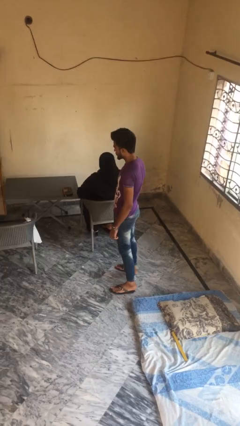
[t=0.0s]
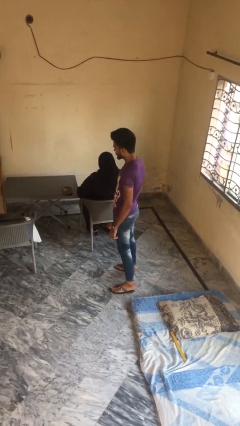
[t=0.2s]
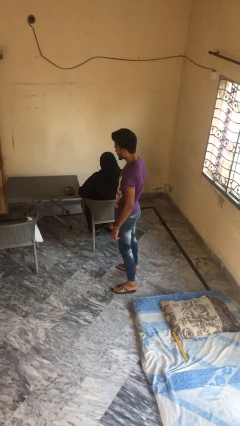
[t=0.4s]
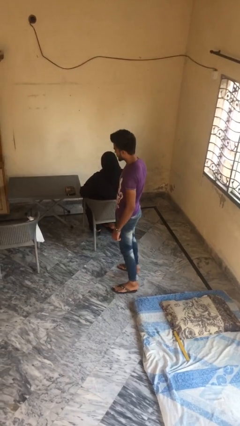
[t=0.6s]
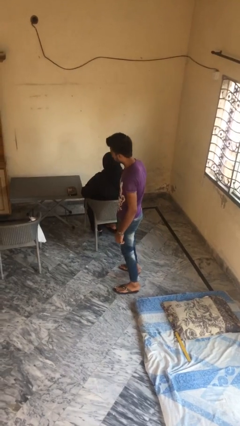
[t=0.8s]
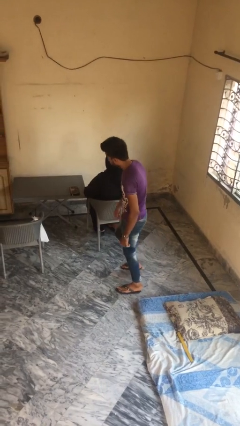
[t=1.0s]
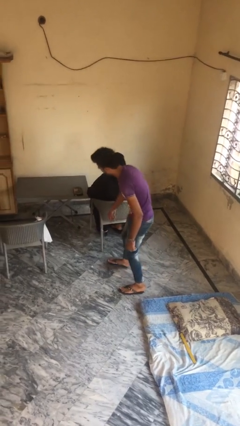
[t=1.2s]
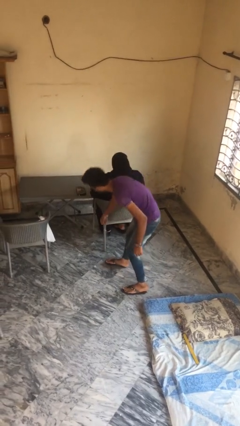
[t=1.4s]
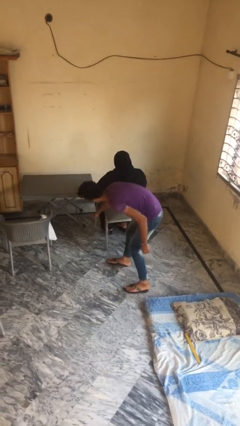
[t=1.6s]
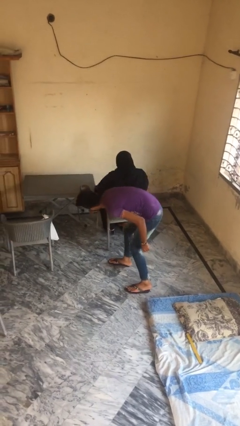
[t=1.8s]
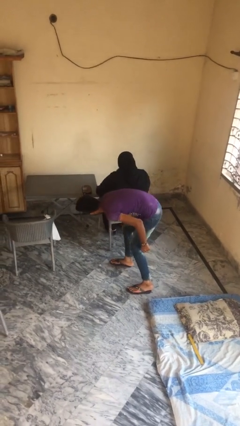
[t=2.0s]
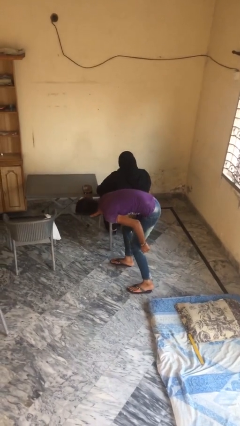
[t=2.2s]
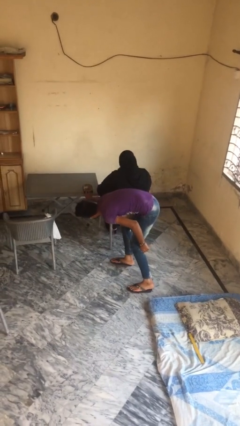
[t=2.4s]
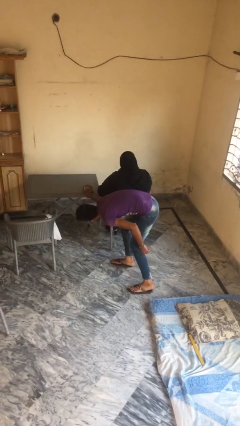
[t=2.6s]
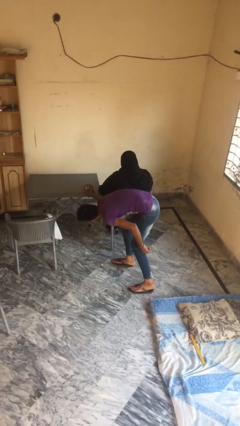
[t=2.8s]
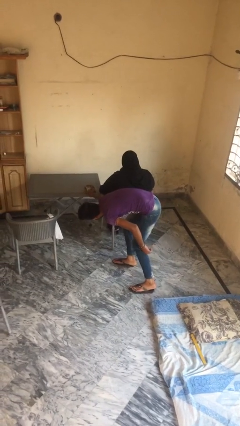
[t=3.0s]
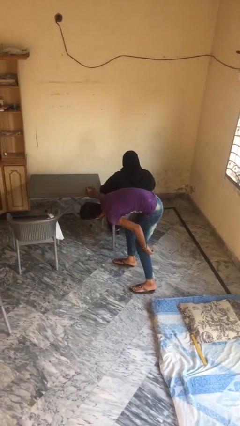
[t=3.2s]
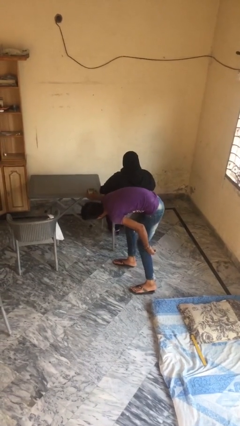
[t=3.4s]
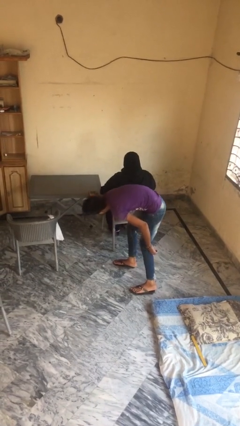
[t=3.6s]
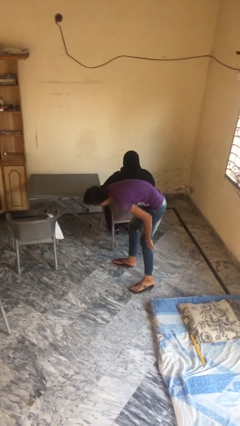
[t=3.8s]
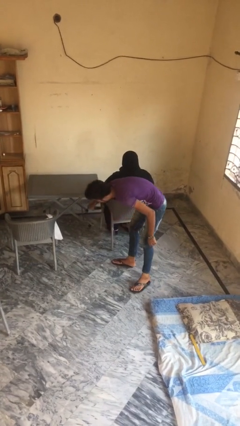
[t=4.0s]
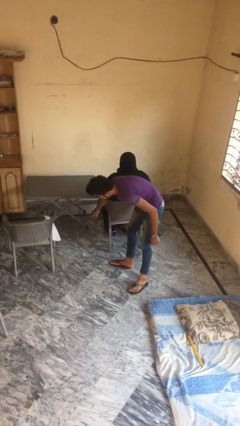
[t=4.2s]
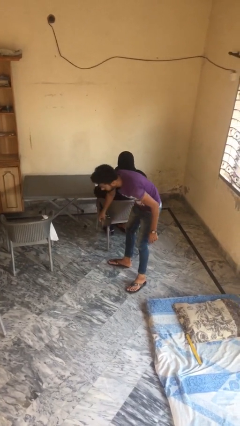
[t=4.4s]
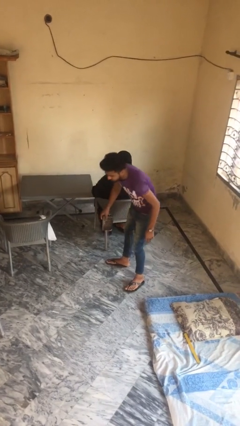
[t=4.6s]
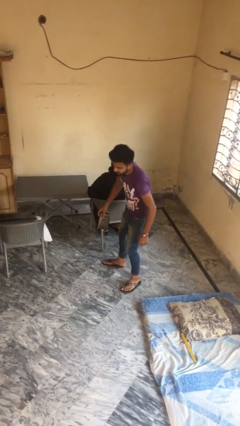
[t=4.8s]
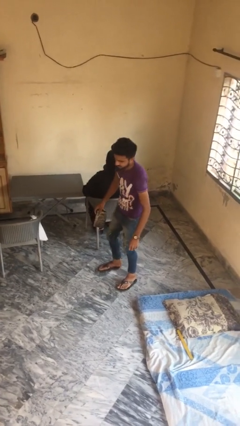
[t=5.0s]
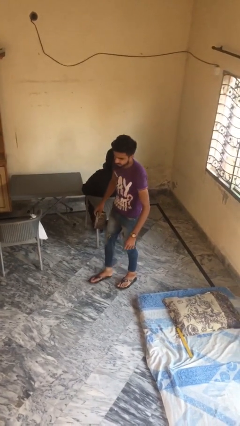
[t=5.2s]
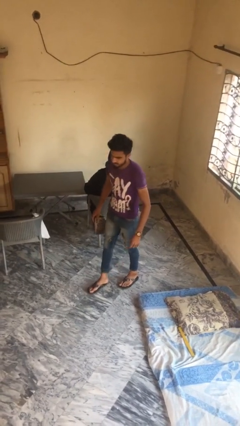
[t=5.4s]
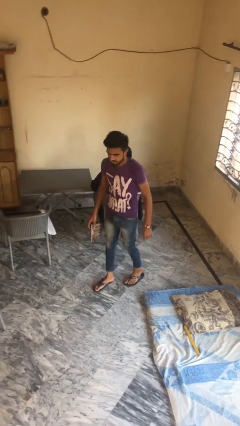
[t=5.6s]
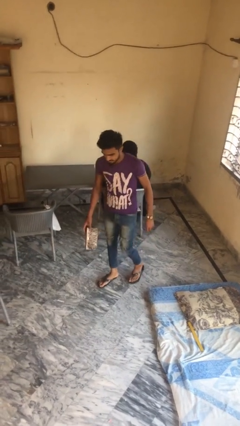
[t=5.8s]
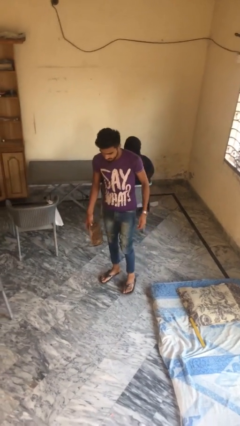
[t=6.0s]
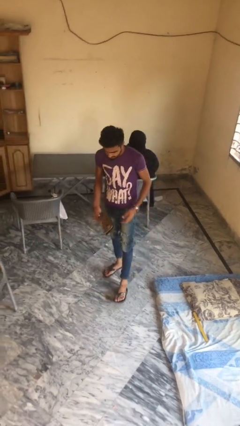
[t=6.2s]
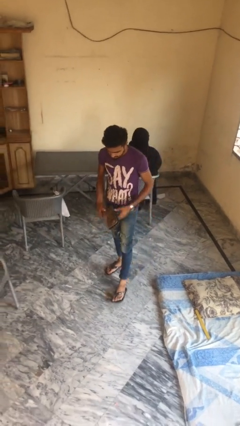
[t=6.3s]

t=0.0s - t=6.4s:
person steals object from person

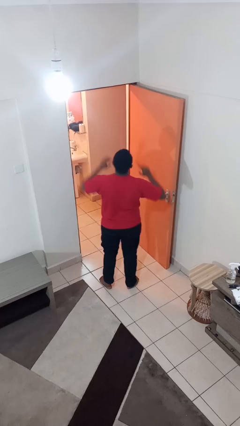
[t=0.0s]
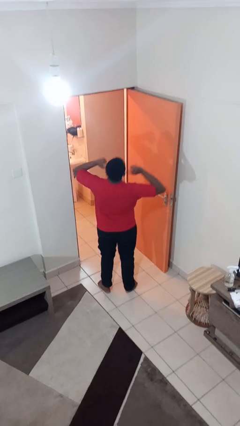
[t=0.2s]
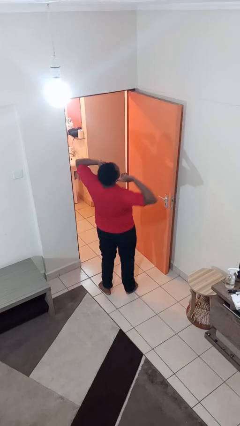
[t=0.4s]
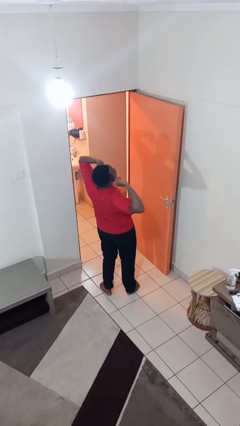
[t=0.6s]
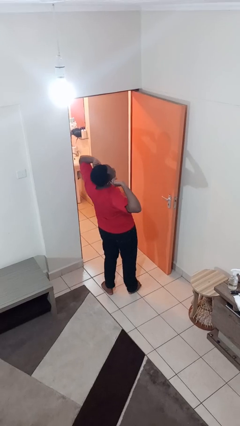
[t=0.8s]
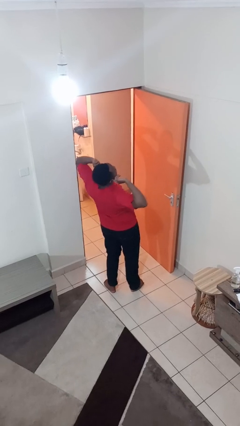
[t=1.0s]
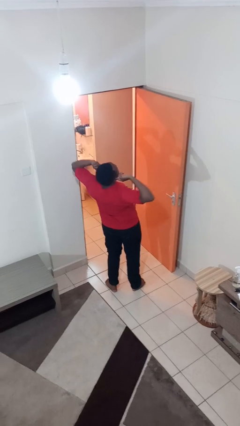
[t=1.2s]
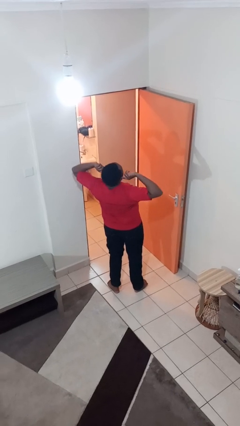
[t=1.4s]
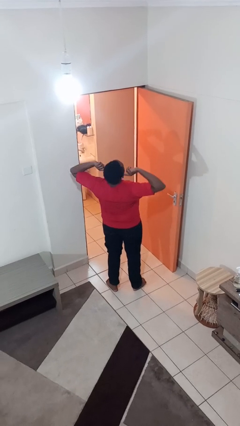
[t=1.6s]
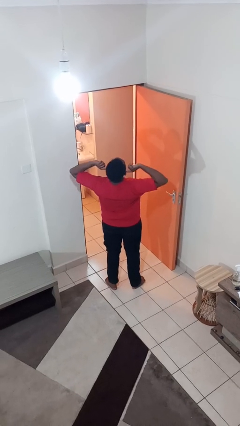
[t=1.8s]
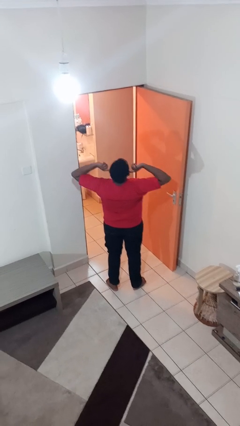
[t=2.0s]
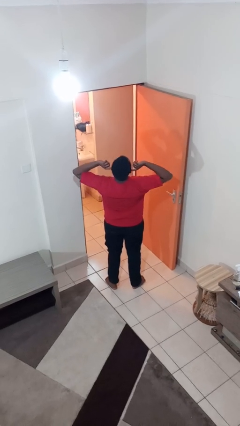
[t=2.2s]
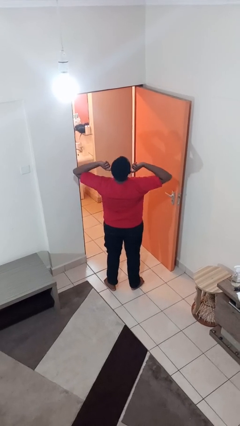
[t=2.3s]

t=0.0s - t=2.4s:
person puts fingers in ear

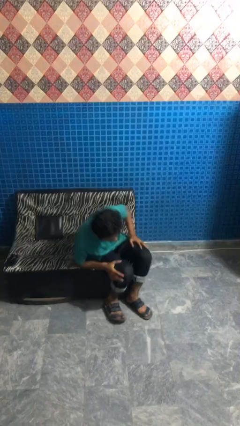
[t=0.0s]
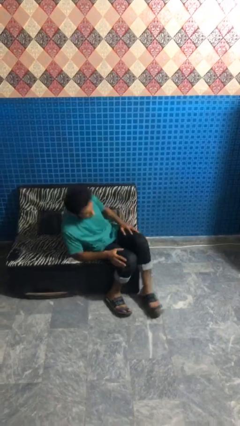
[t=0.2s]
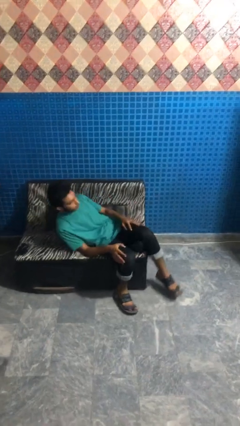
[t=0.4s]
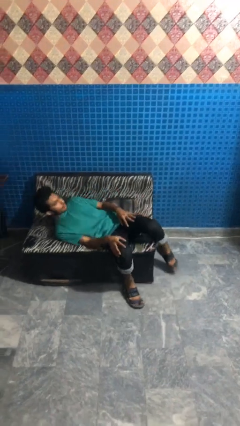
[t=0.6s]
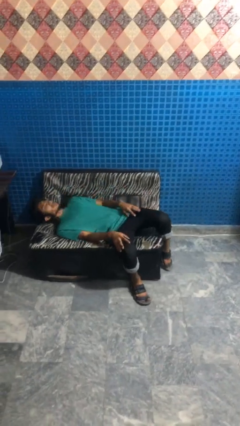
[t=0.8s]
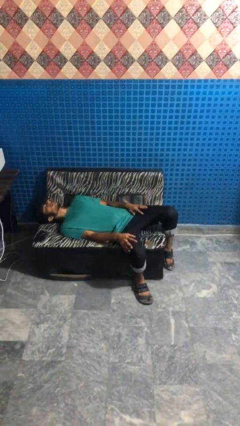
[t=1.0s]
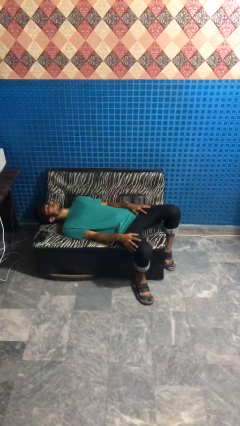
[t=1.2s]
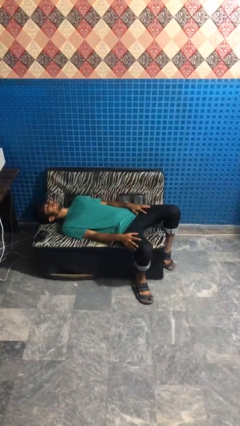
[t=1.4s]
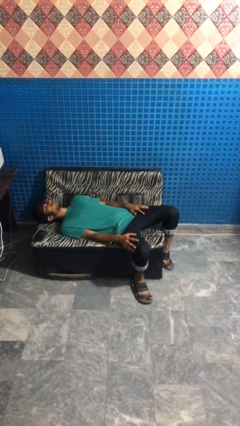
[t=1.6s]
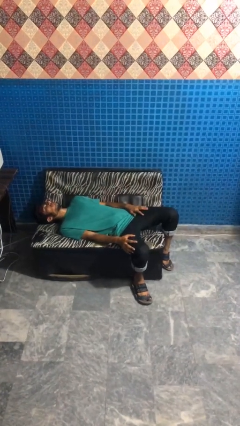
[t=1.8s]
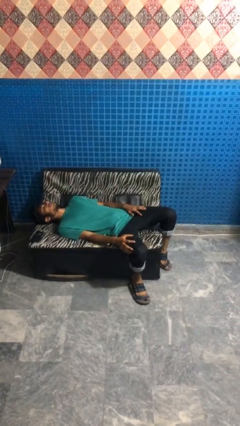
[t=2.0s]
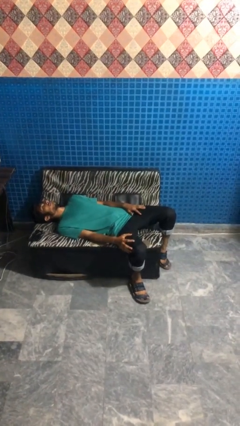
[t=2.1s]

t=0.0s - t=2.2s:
person lies down on couch

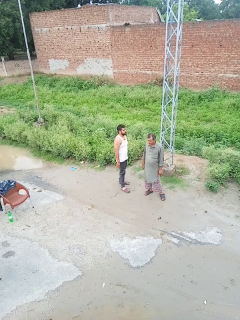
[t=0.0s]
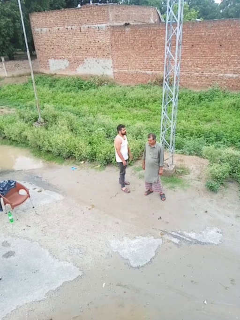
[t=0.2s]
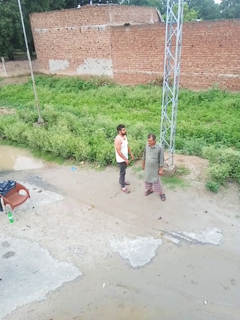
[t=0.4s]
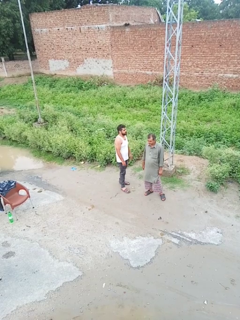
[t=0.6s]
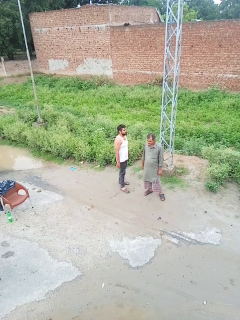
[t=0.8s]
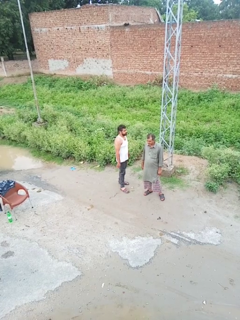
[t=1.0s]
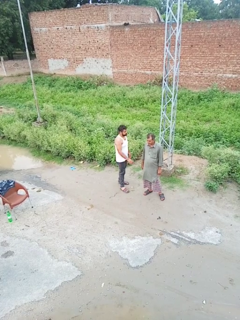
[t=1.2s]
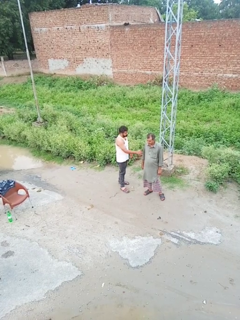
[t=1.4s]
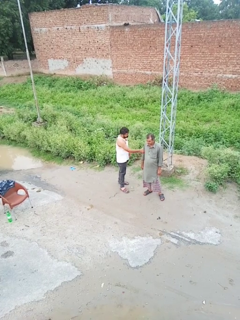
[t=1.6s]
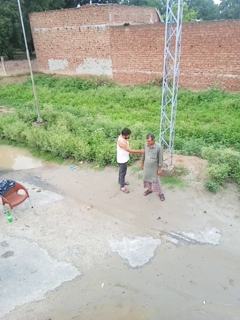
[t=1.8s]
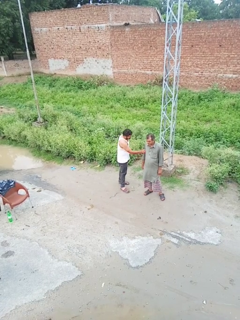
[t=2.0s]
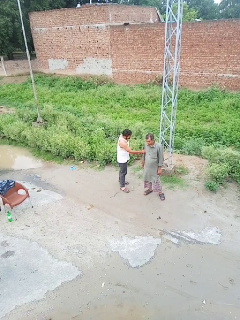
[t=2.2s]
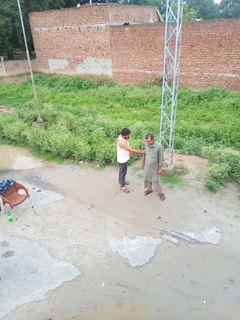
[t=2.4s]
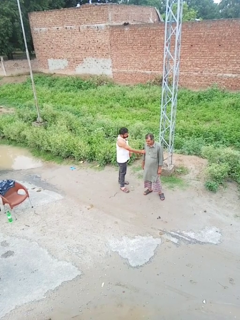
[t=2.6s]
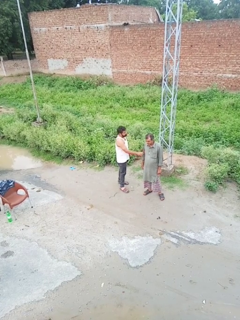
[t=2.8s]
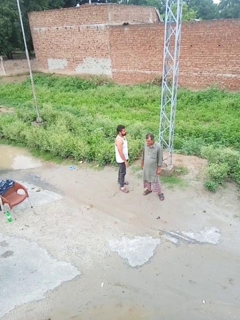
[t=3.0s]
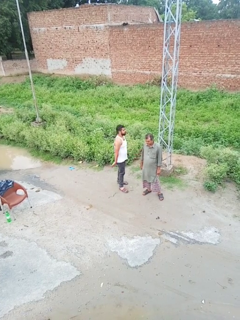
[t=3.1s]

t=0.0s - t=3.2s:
person grabs person by bicep

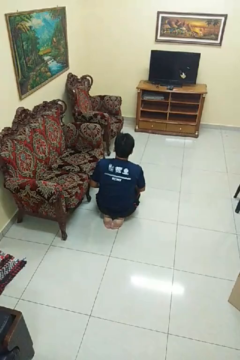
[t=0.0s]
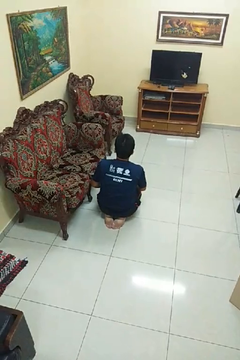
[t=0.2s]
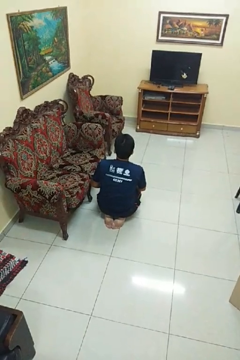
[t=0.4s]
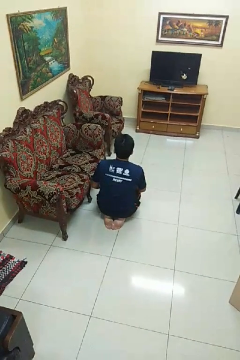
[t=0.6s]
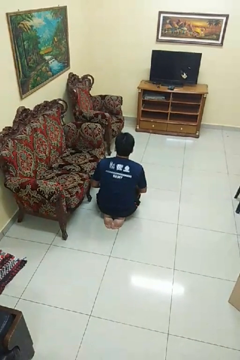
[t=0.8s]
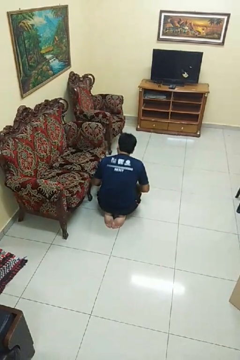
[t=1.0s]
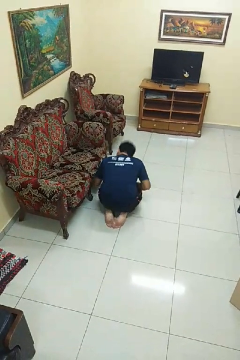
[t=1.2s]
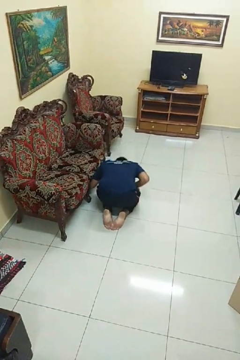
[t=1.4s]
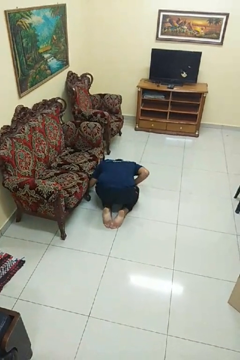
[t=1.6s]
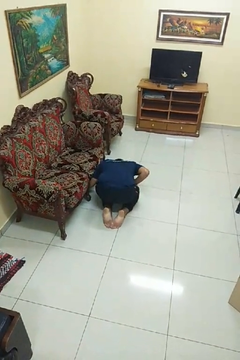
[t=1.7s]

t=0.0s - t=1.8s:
person searches under couch

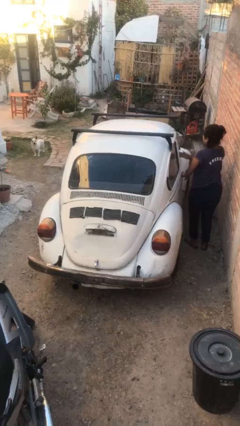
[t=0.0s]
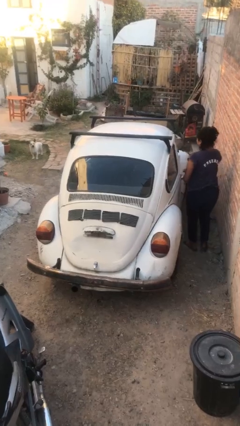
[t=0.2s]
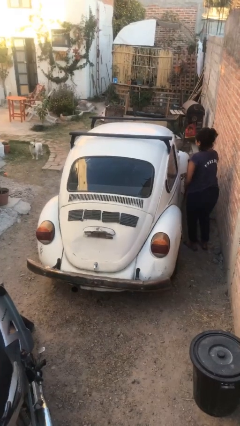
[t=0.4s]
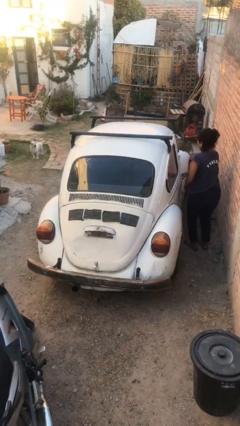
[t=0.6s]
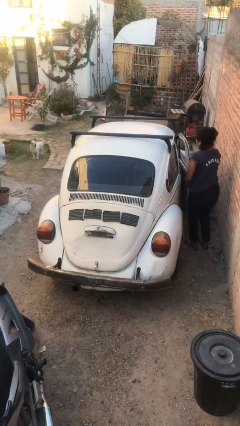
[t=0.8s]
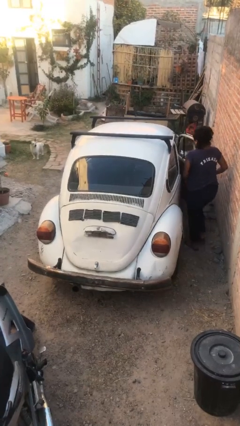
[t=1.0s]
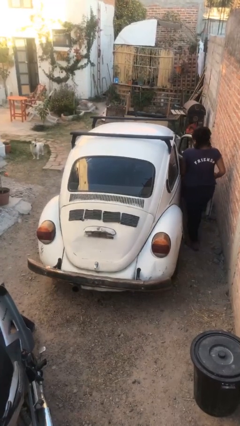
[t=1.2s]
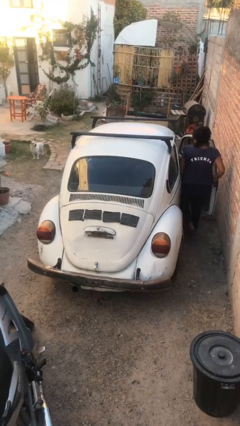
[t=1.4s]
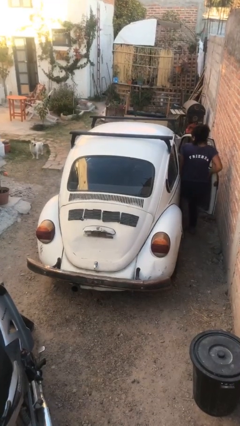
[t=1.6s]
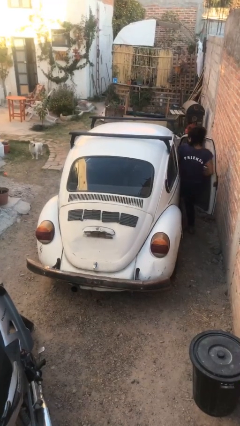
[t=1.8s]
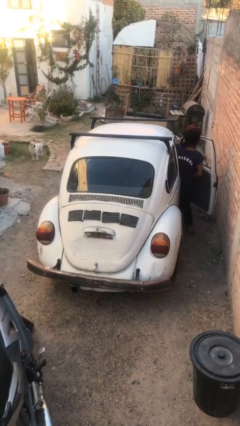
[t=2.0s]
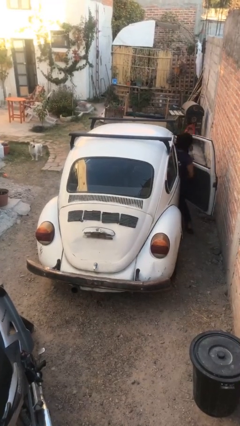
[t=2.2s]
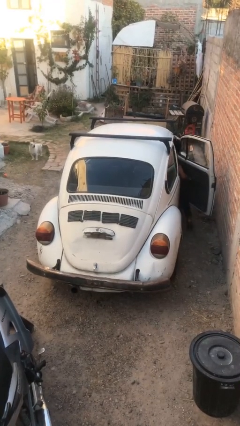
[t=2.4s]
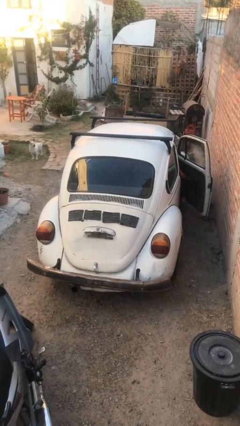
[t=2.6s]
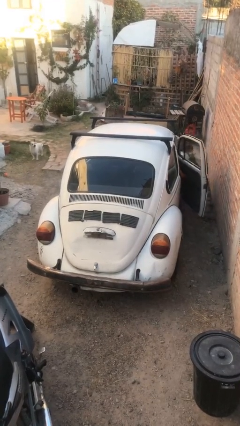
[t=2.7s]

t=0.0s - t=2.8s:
car picks up person
